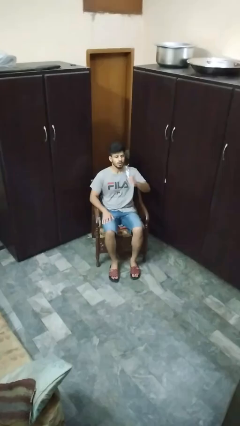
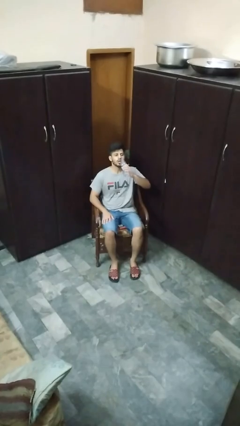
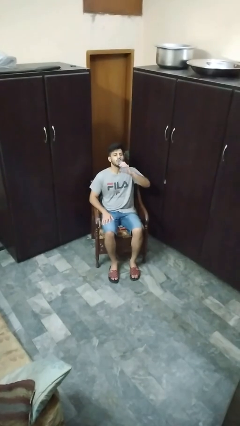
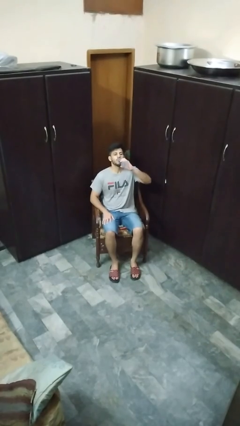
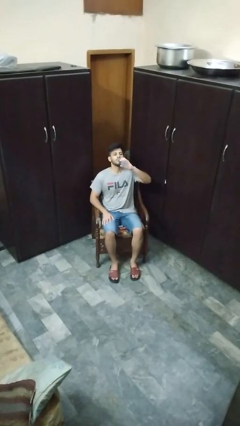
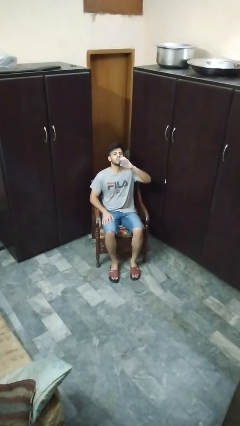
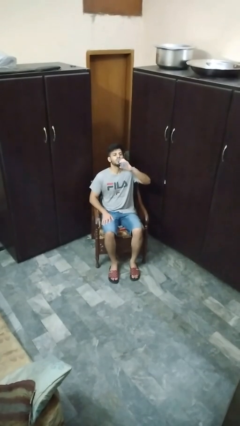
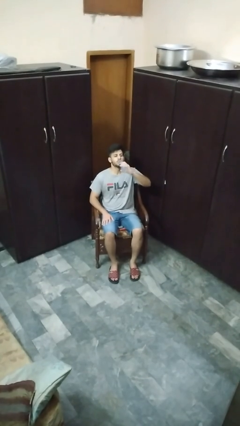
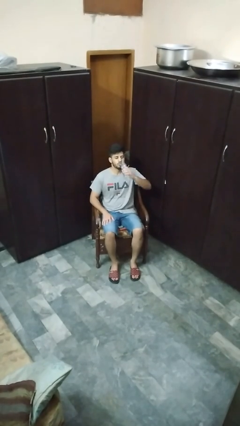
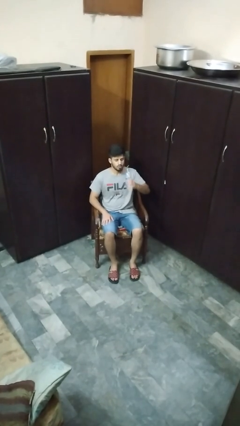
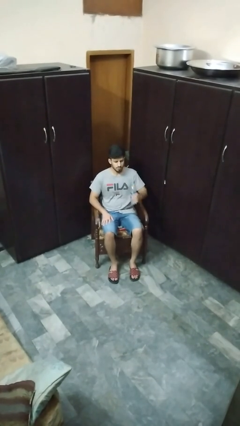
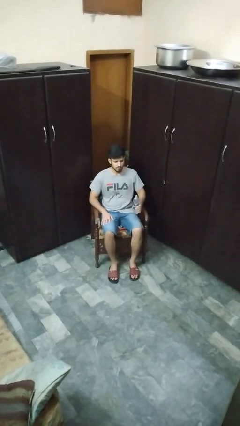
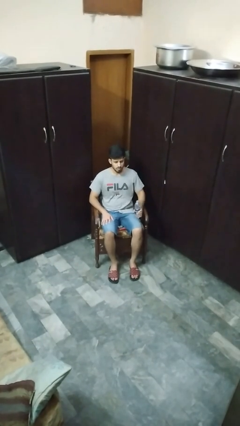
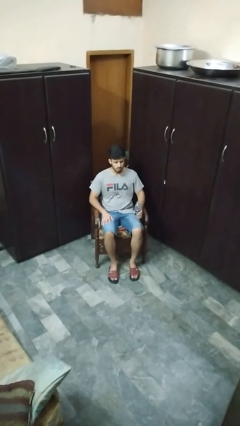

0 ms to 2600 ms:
person drinks from bottle

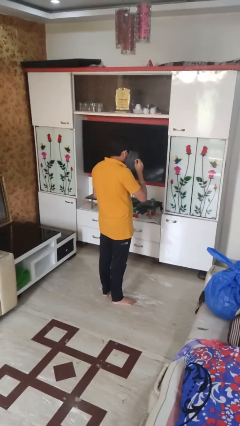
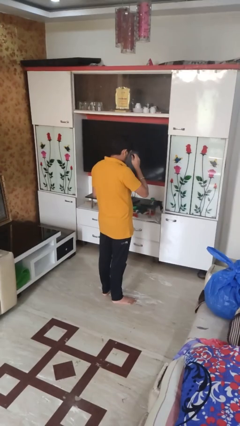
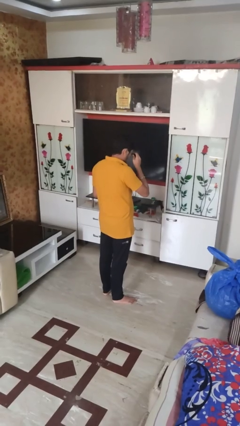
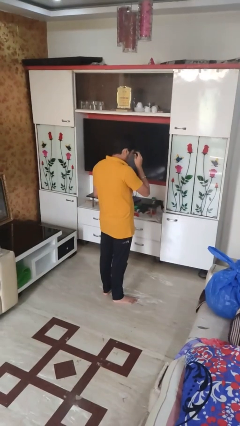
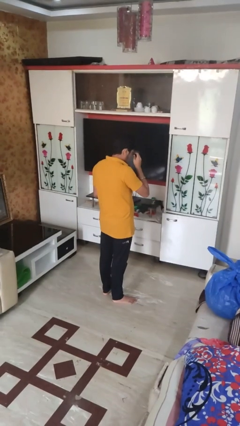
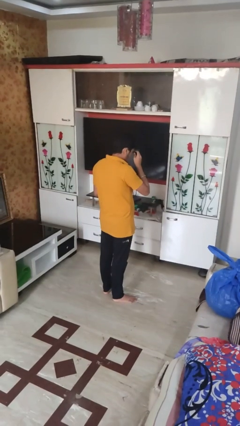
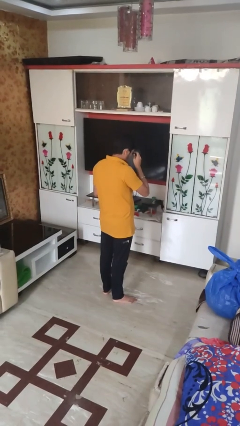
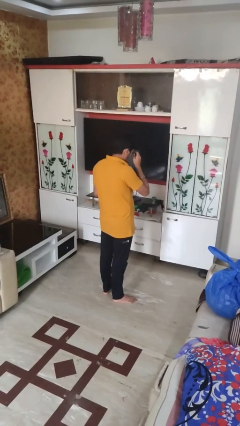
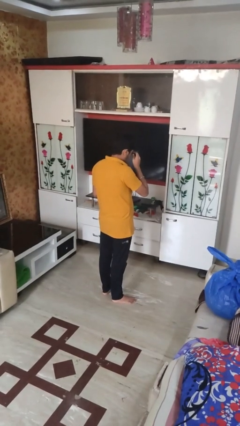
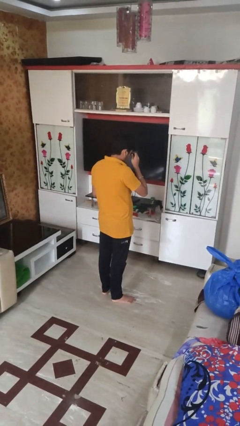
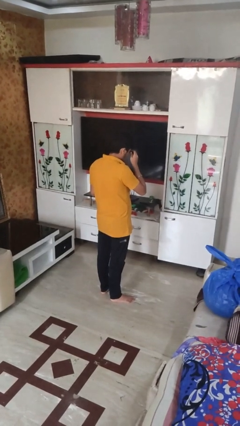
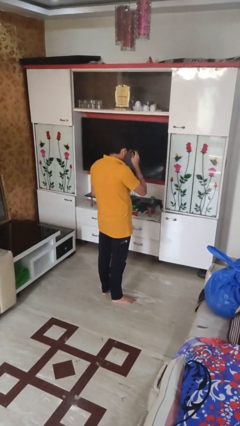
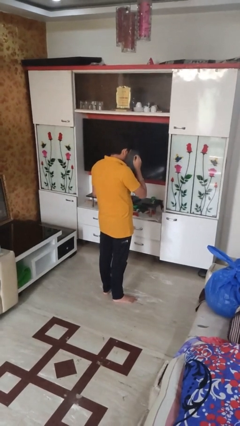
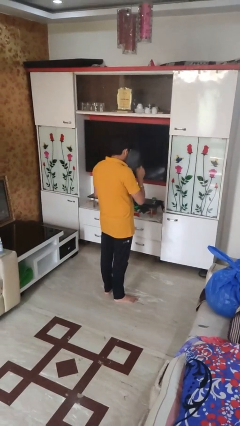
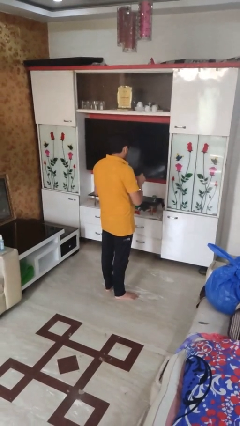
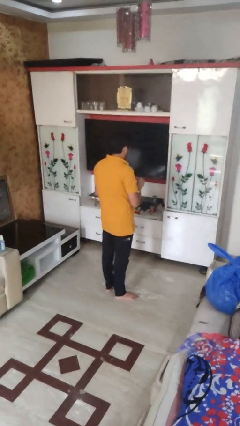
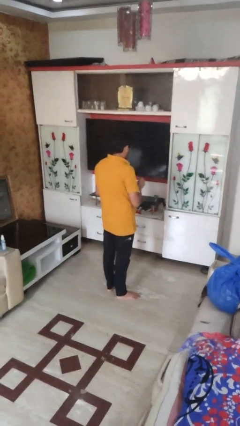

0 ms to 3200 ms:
person applies eye makeup

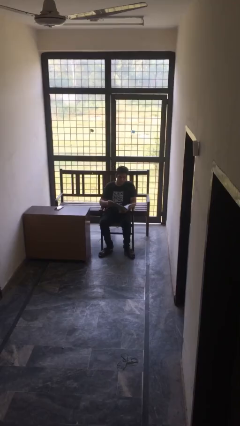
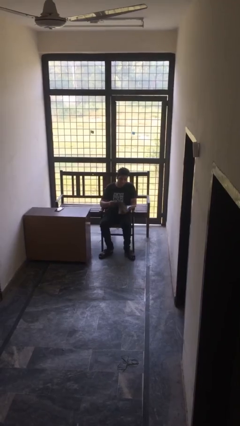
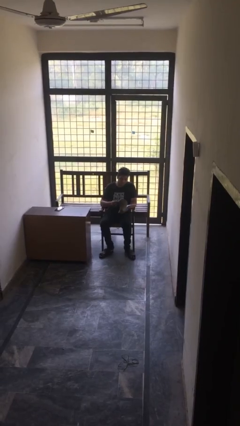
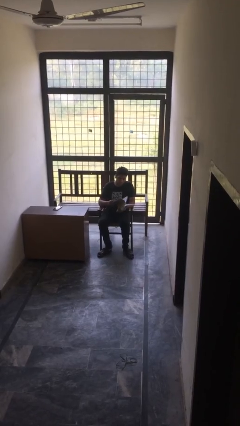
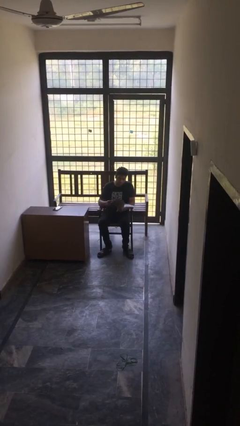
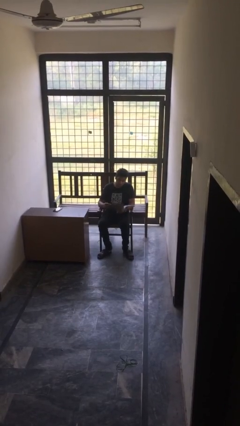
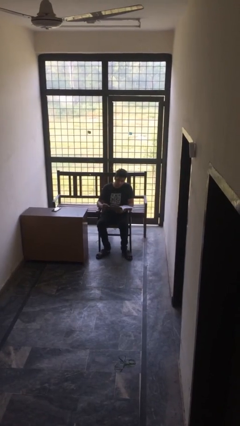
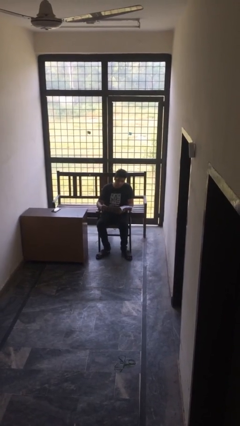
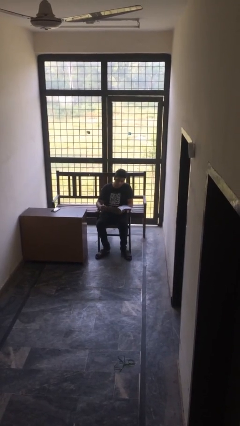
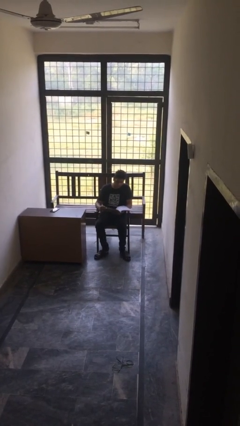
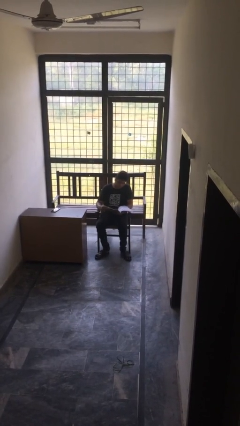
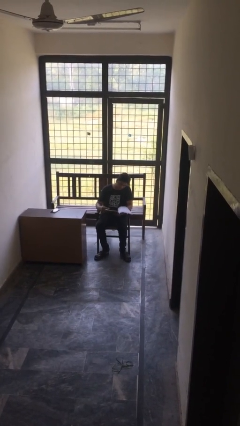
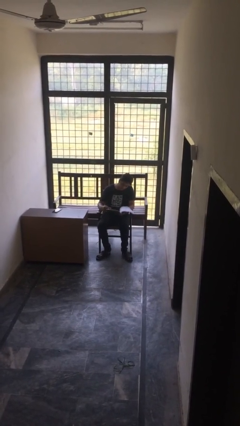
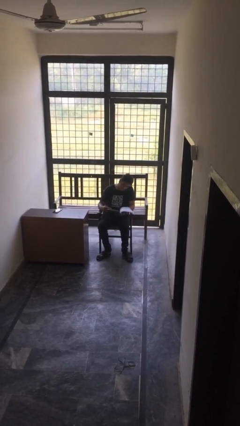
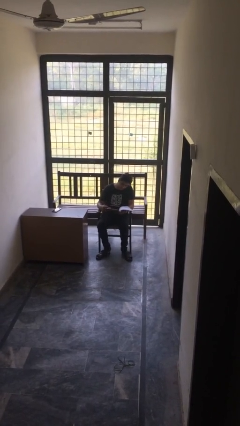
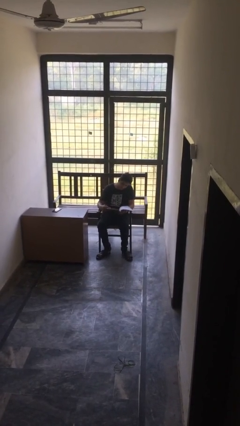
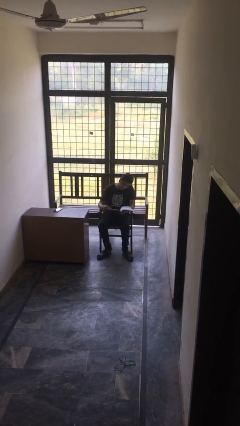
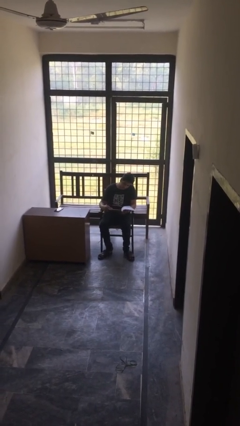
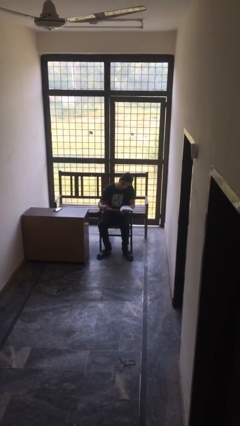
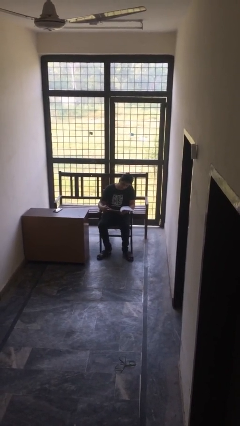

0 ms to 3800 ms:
person reads document

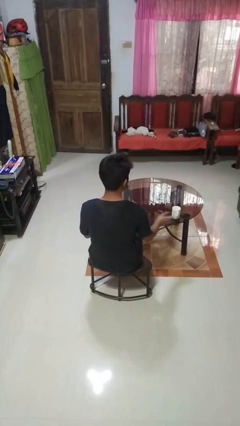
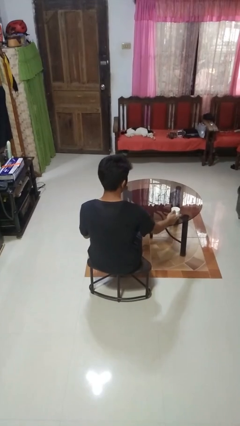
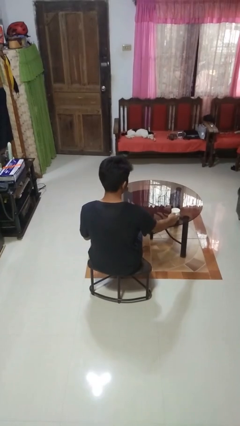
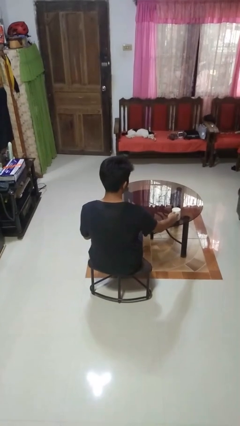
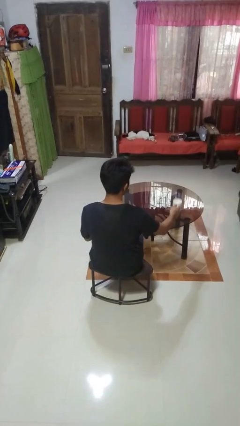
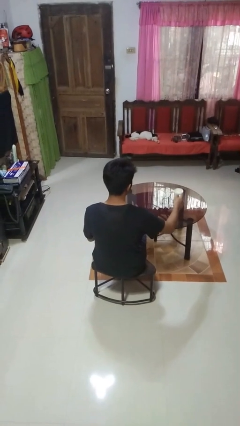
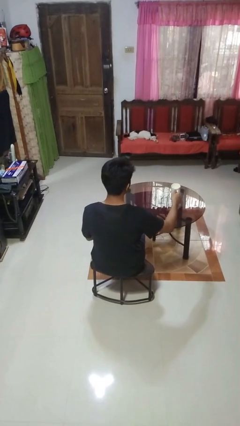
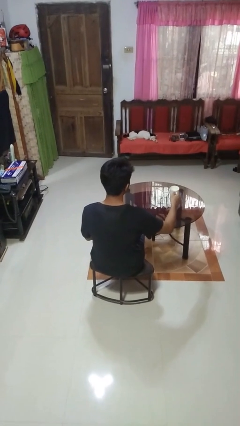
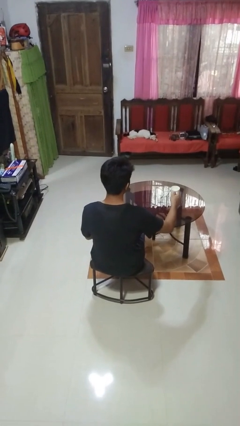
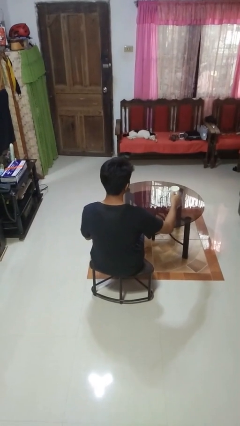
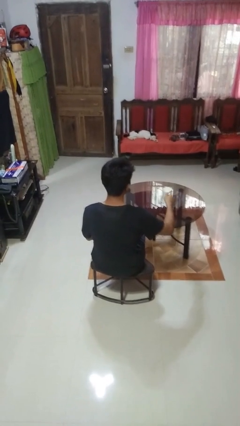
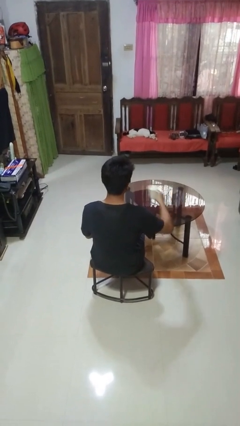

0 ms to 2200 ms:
person picks up object from table

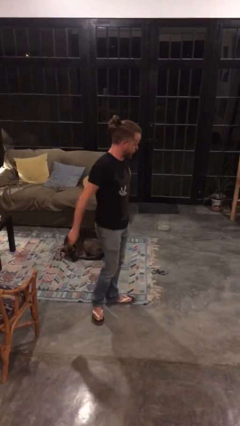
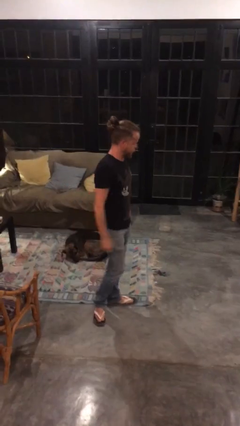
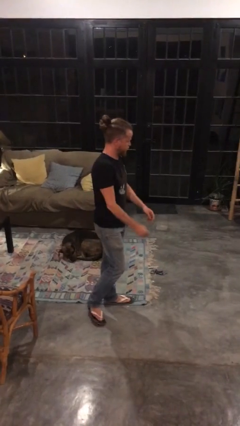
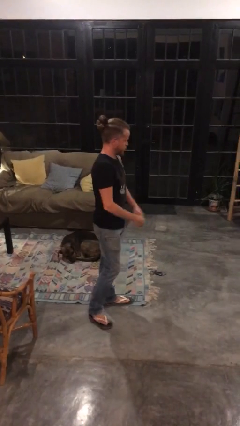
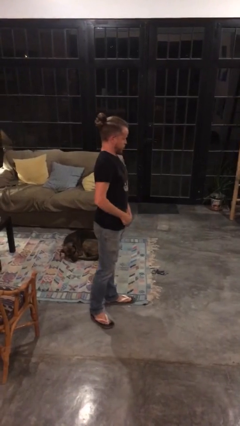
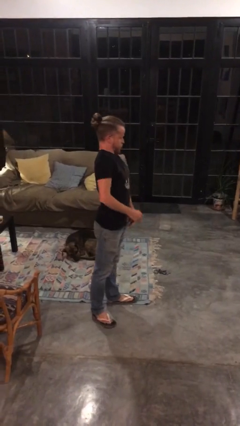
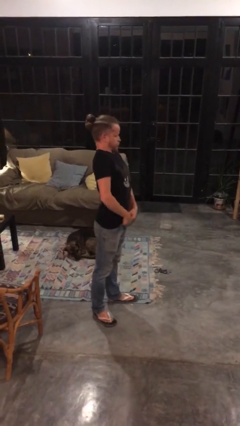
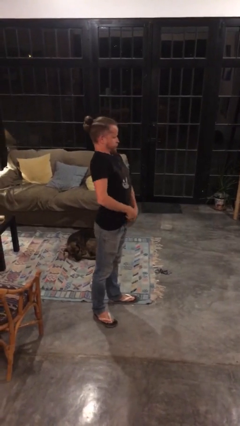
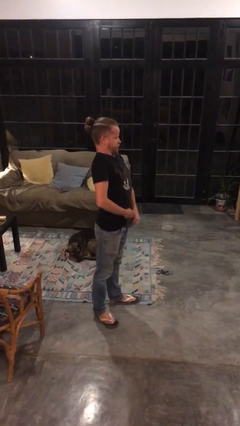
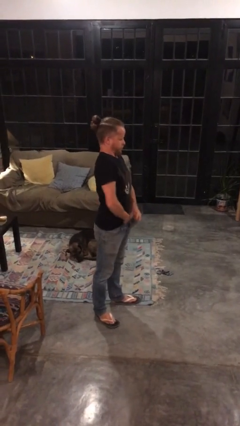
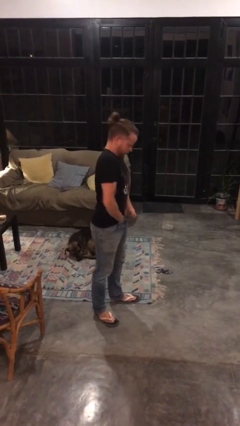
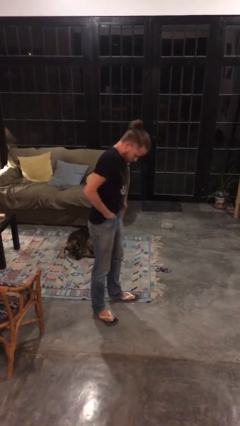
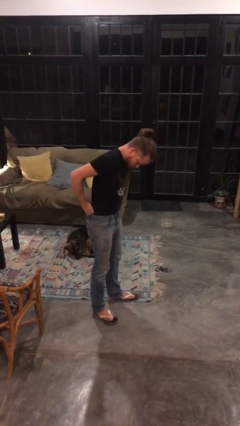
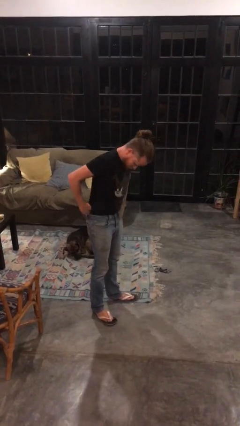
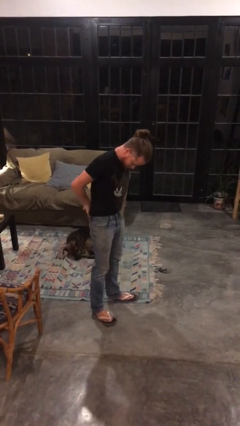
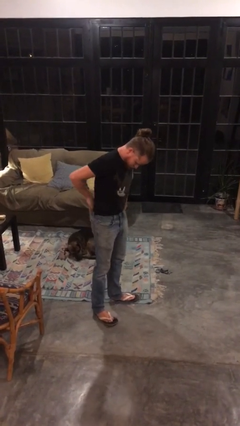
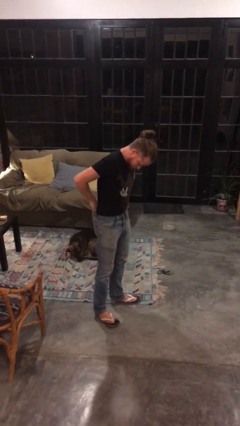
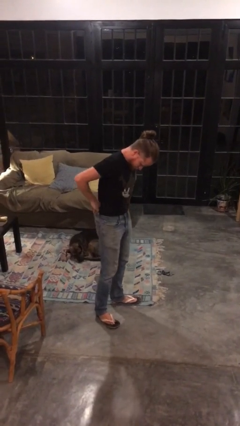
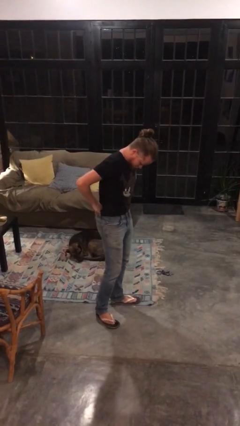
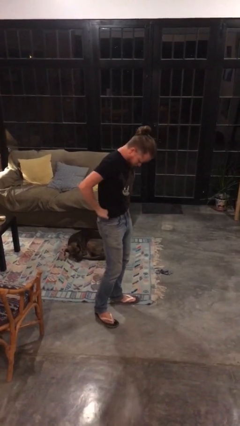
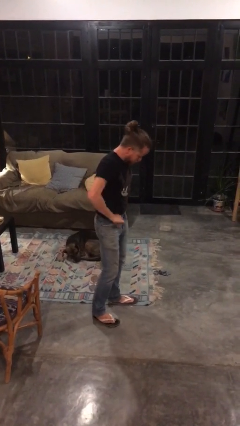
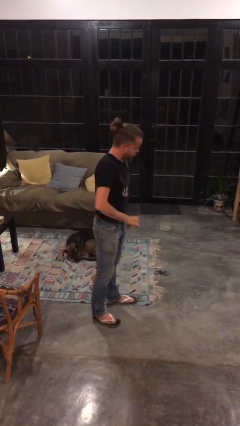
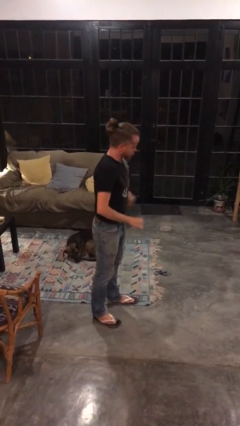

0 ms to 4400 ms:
person tucks in shirt

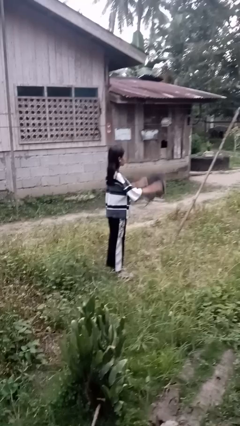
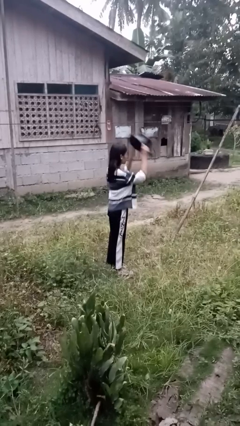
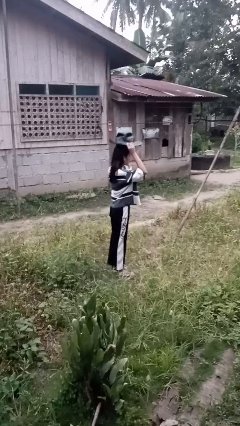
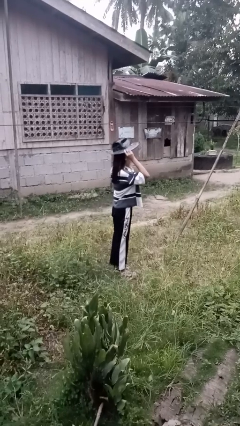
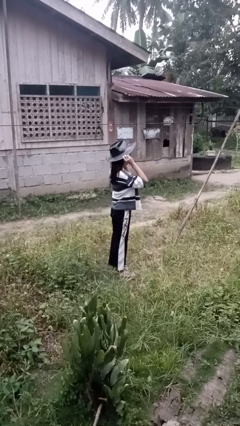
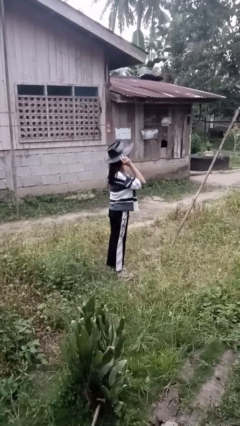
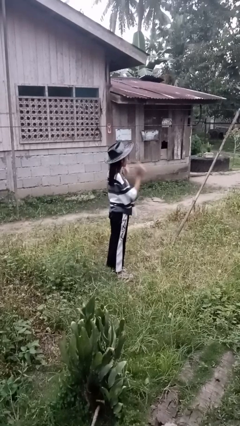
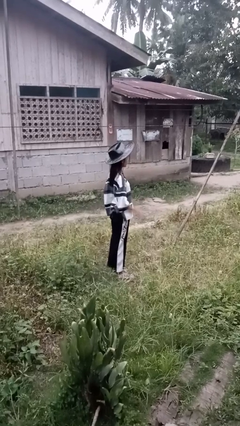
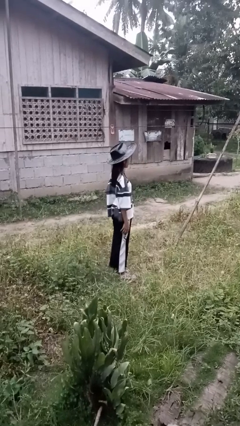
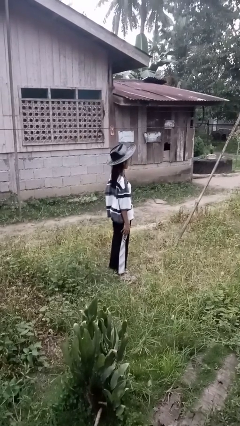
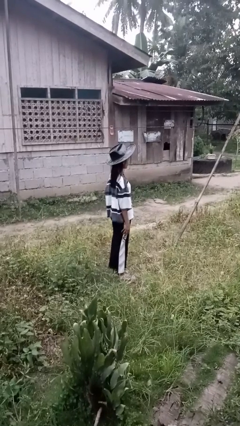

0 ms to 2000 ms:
person puts on hat
